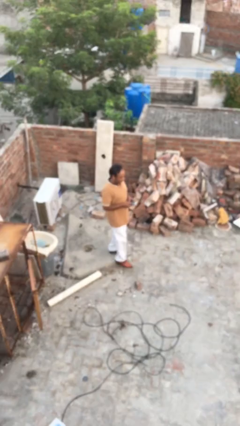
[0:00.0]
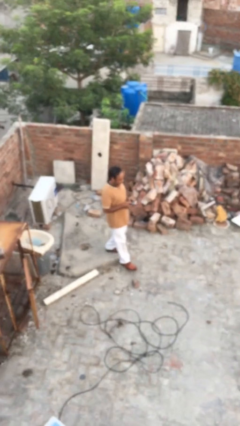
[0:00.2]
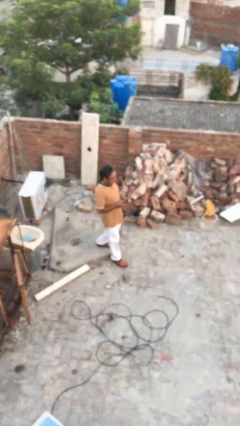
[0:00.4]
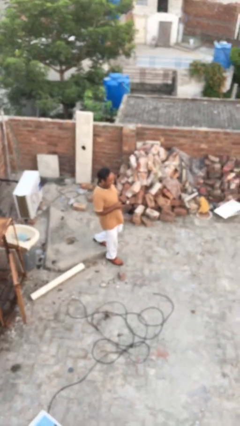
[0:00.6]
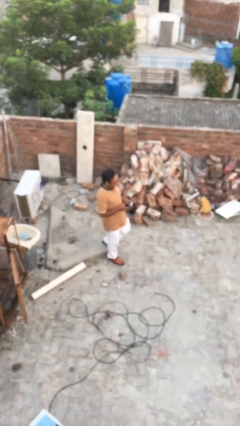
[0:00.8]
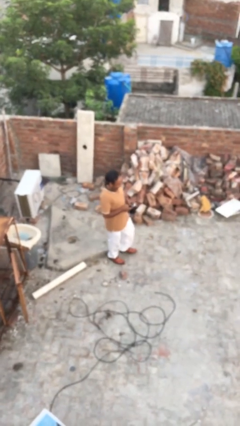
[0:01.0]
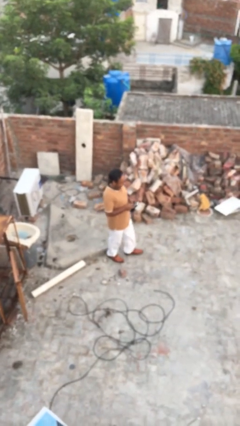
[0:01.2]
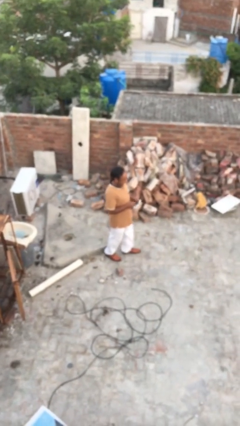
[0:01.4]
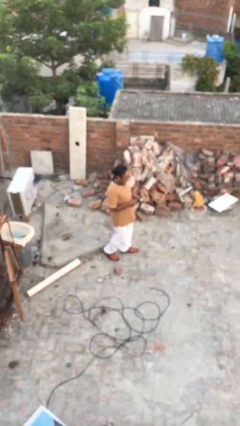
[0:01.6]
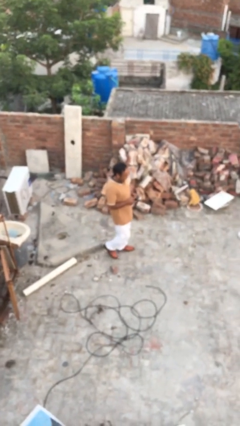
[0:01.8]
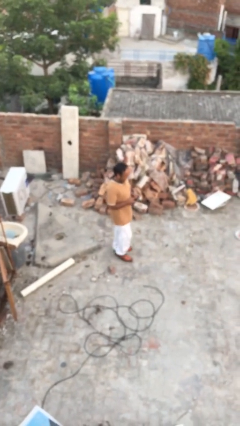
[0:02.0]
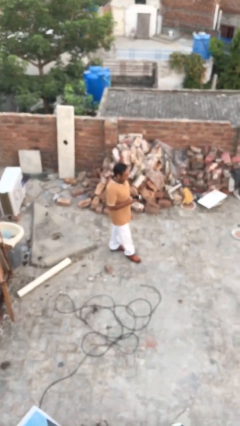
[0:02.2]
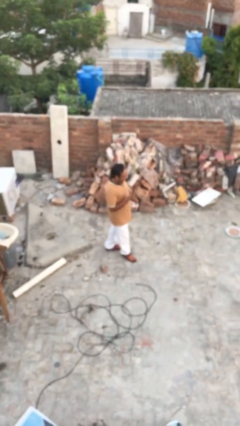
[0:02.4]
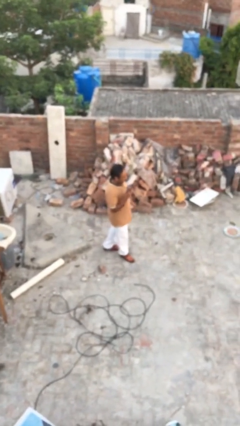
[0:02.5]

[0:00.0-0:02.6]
person texts on phone

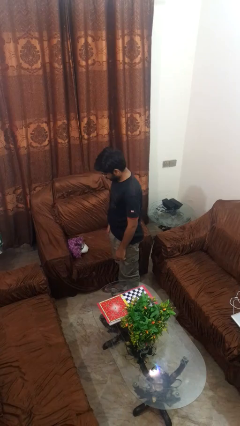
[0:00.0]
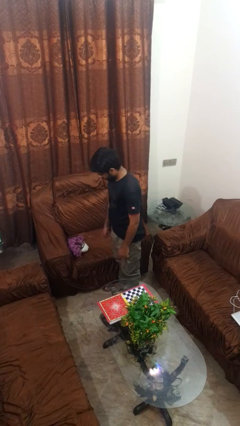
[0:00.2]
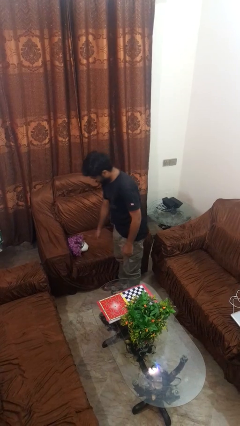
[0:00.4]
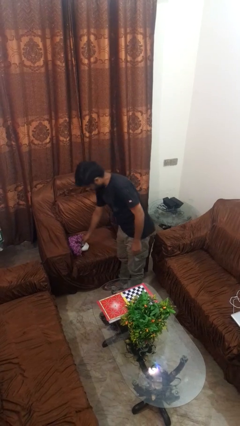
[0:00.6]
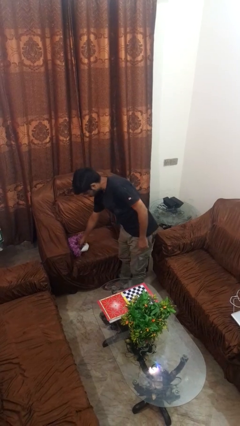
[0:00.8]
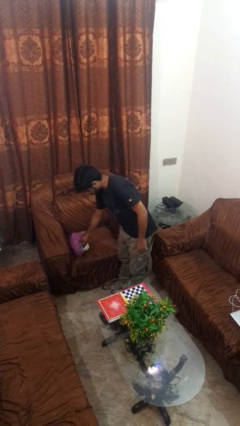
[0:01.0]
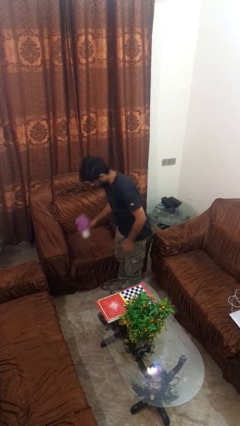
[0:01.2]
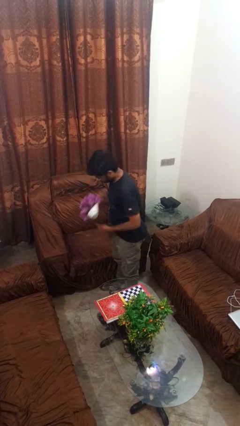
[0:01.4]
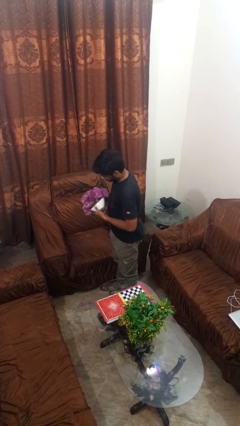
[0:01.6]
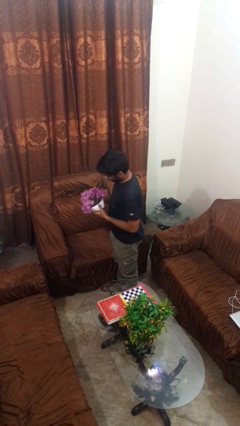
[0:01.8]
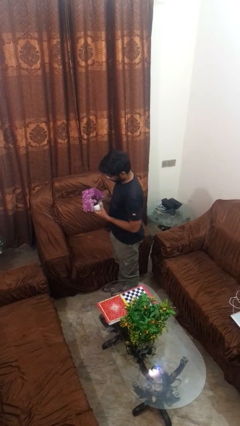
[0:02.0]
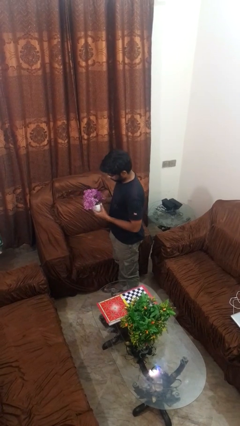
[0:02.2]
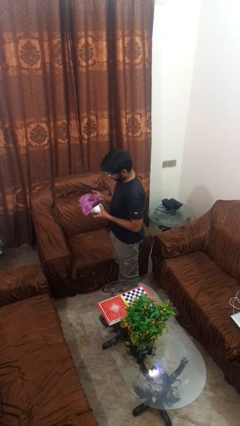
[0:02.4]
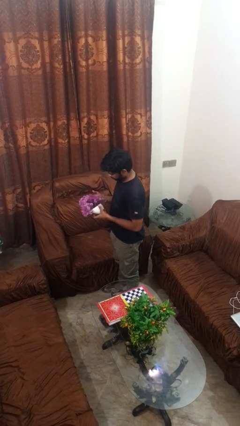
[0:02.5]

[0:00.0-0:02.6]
person picks up object from couch

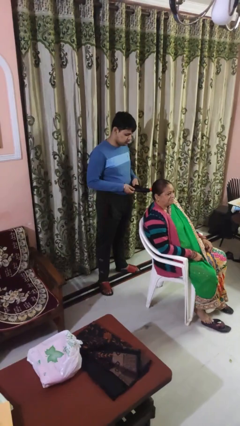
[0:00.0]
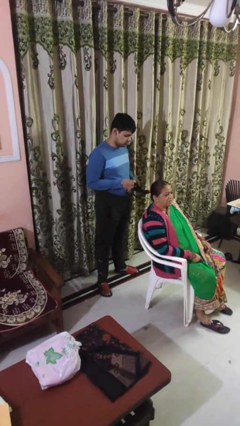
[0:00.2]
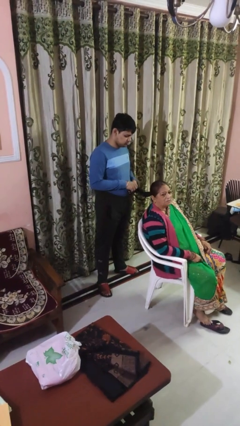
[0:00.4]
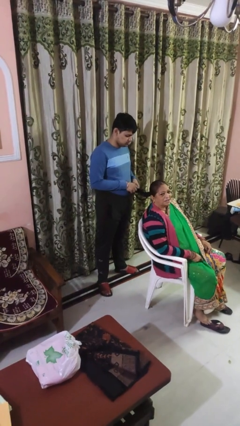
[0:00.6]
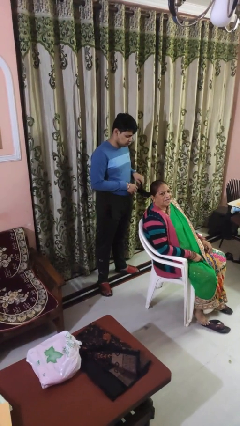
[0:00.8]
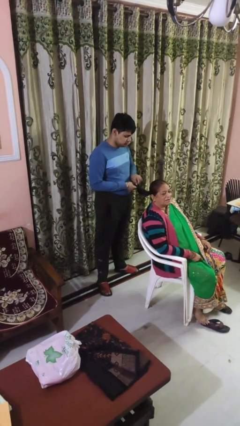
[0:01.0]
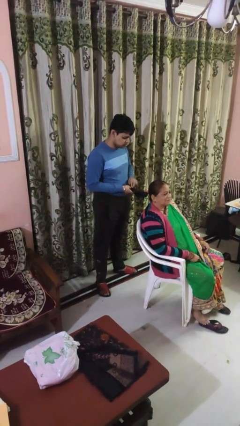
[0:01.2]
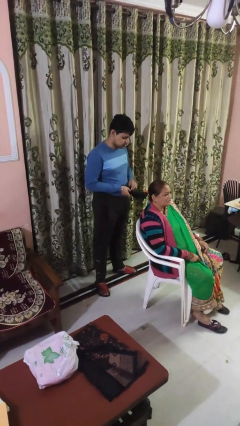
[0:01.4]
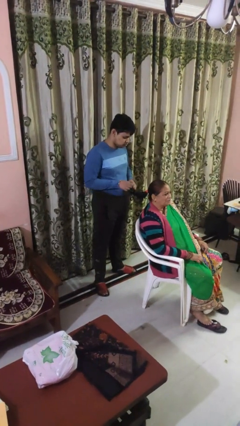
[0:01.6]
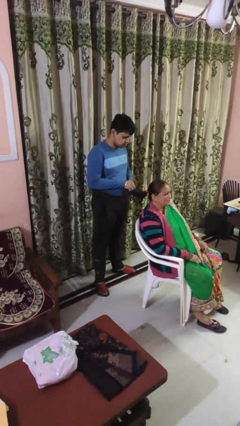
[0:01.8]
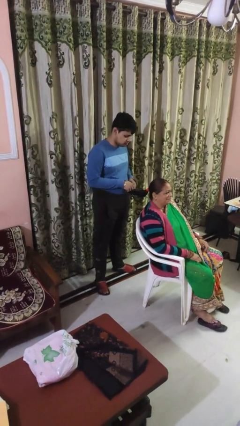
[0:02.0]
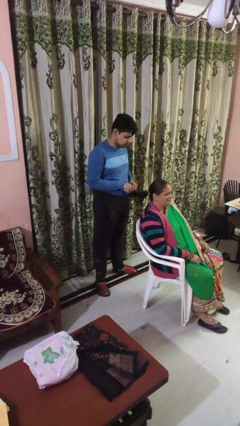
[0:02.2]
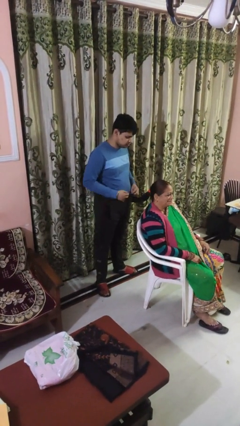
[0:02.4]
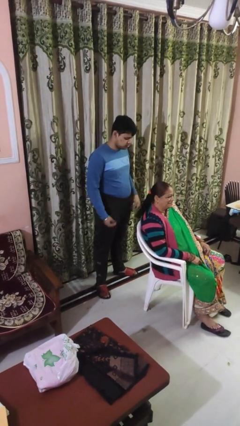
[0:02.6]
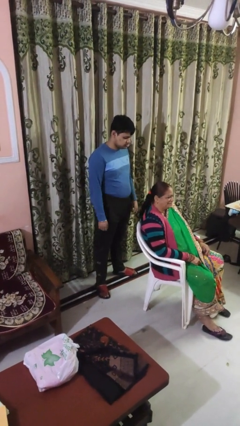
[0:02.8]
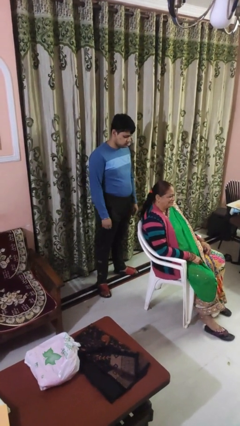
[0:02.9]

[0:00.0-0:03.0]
person braids hair of person

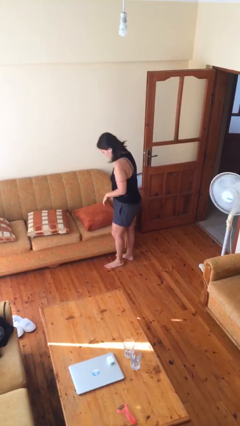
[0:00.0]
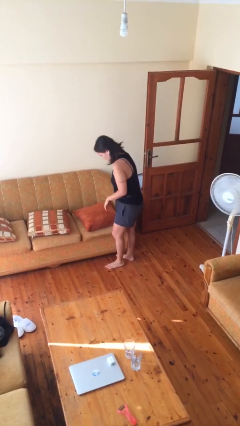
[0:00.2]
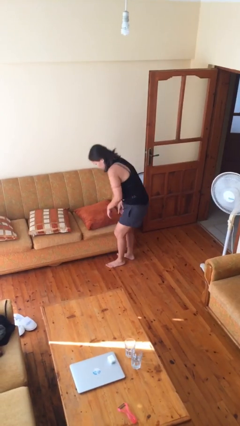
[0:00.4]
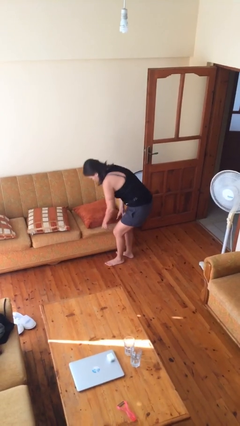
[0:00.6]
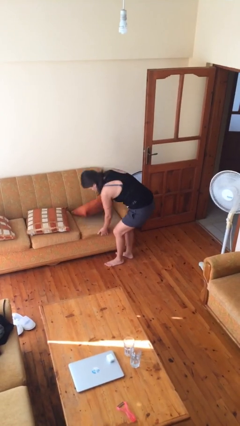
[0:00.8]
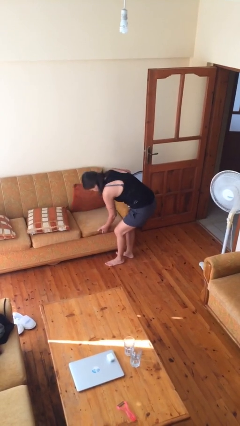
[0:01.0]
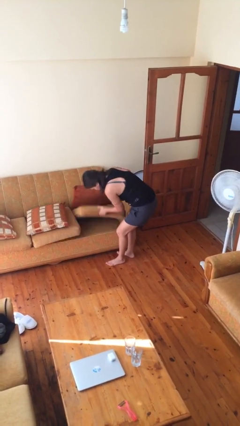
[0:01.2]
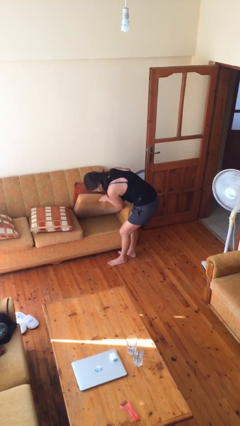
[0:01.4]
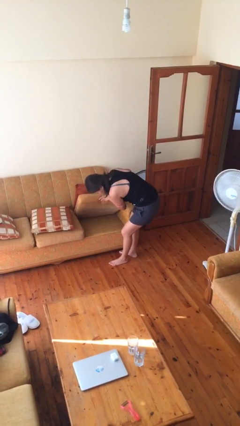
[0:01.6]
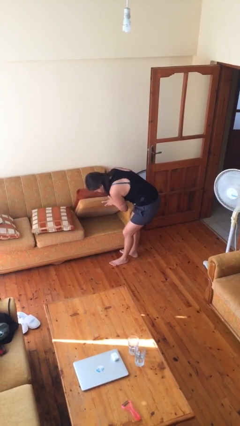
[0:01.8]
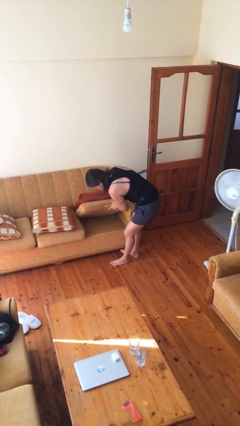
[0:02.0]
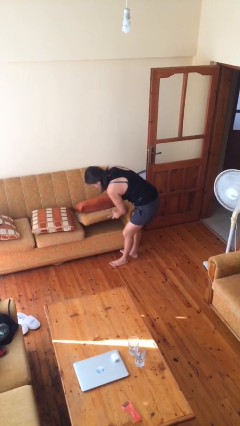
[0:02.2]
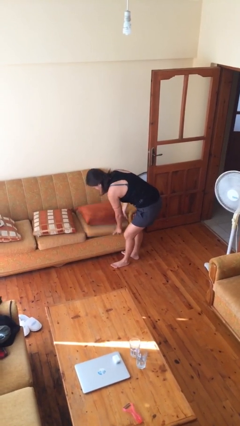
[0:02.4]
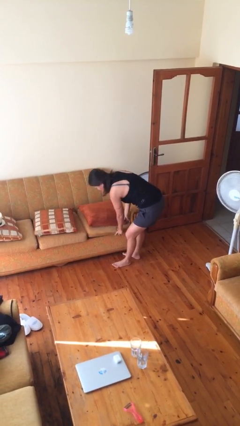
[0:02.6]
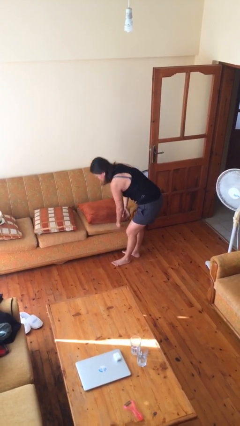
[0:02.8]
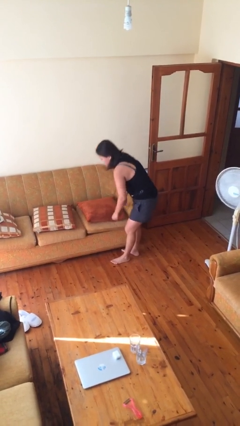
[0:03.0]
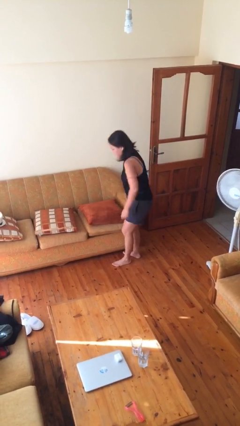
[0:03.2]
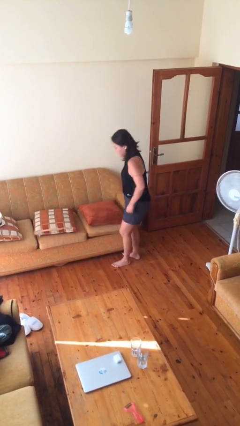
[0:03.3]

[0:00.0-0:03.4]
person searches in couch

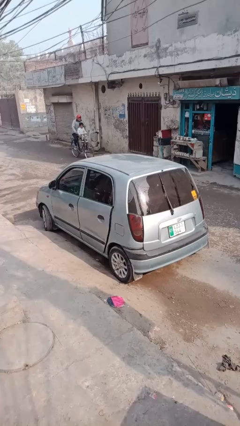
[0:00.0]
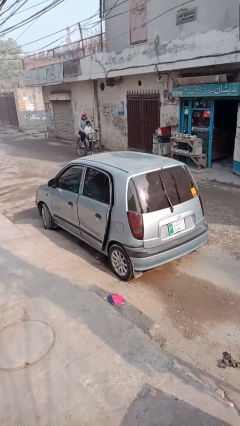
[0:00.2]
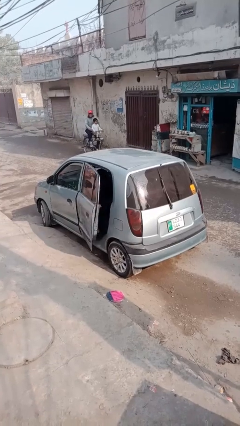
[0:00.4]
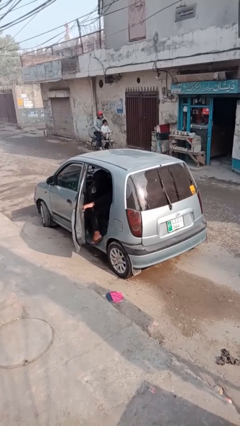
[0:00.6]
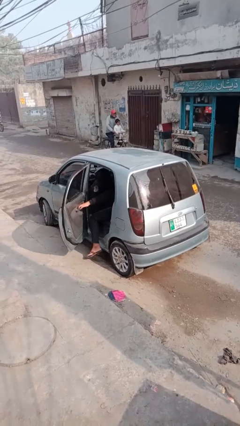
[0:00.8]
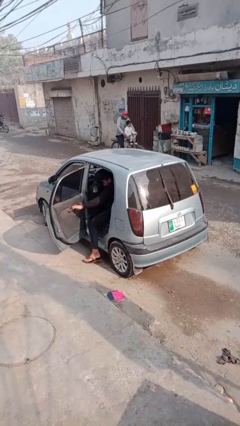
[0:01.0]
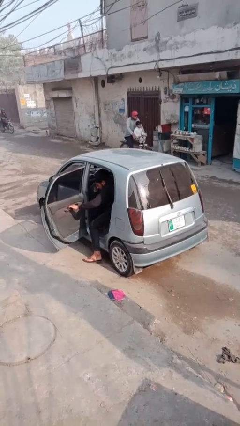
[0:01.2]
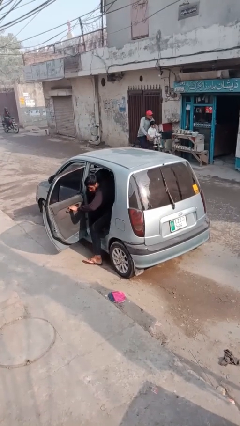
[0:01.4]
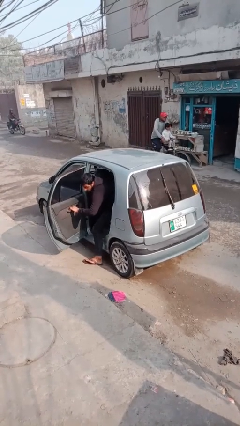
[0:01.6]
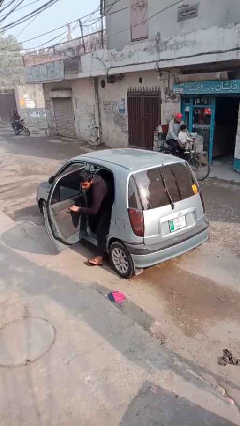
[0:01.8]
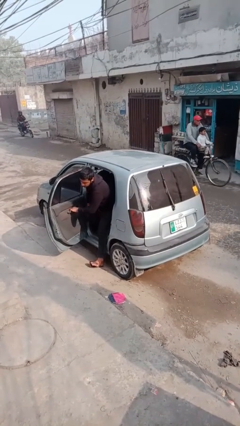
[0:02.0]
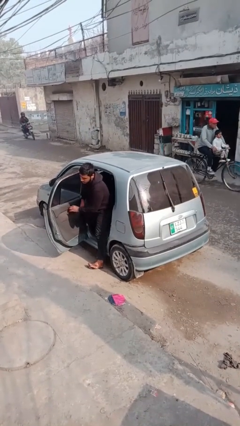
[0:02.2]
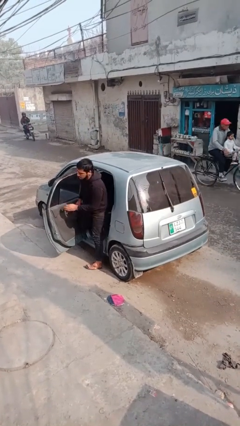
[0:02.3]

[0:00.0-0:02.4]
car drops off person

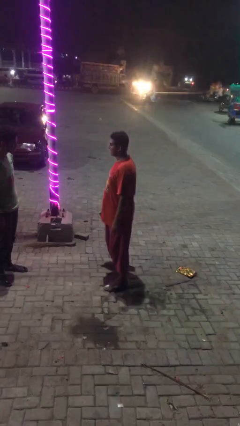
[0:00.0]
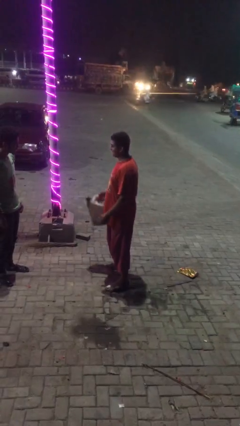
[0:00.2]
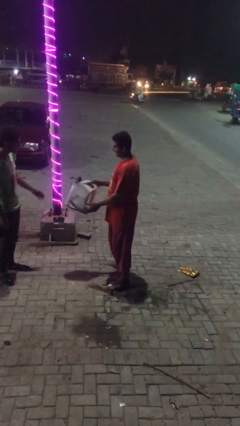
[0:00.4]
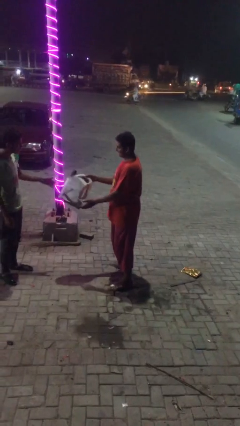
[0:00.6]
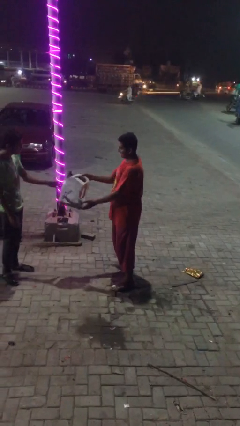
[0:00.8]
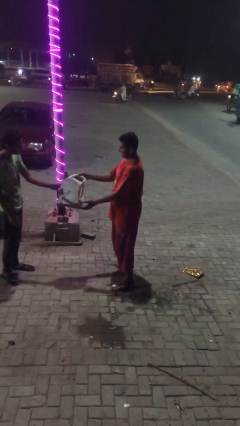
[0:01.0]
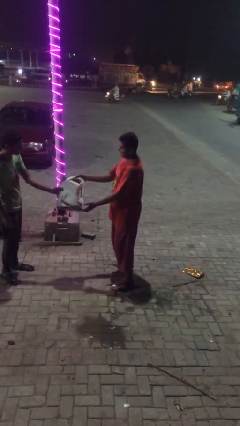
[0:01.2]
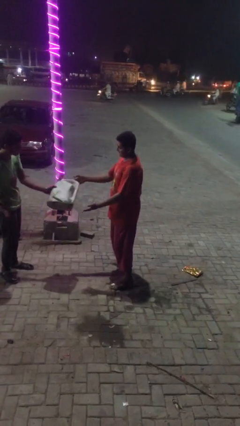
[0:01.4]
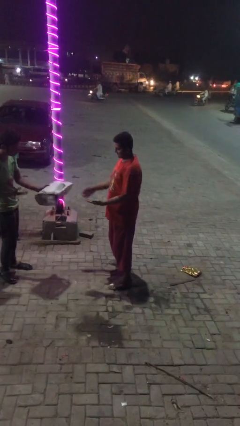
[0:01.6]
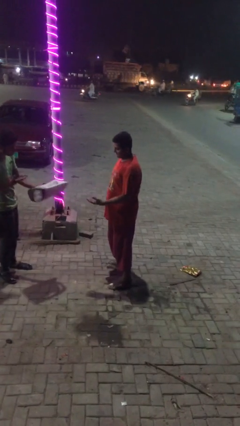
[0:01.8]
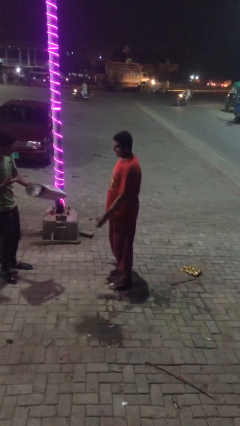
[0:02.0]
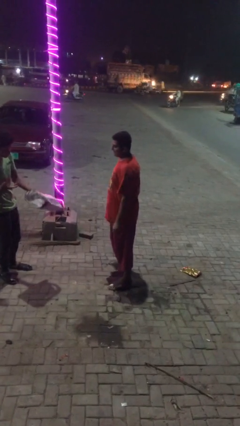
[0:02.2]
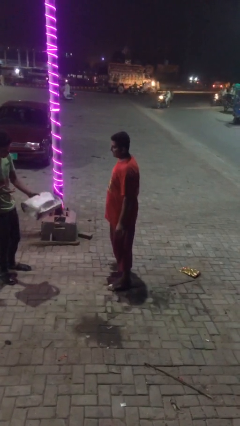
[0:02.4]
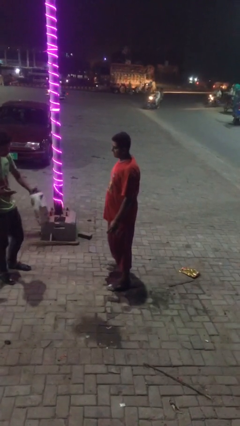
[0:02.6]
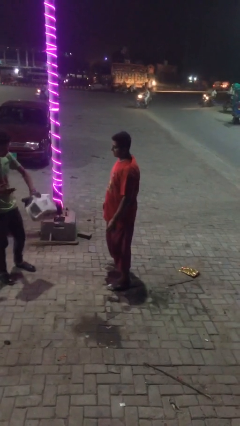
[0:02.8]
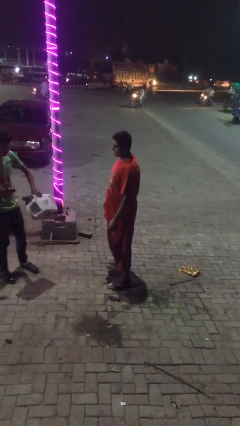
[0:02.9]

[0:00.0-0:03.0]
person transfers object to person

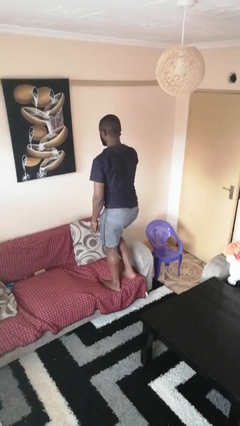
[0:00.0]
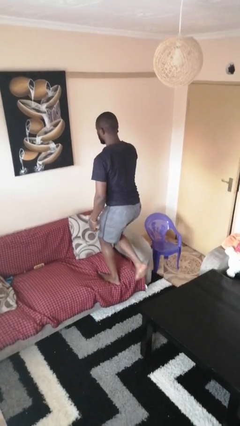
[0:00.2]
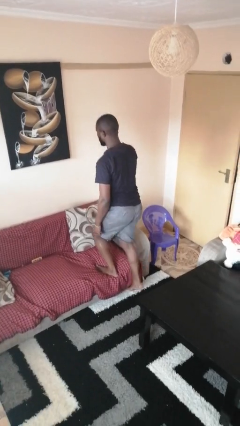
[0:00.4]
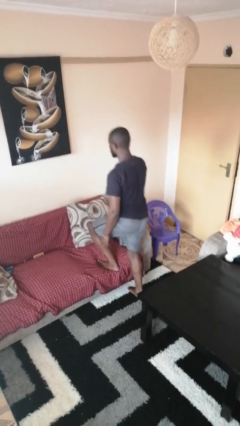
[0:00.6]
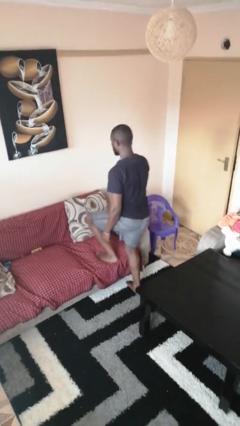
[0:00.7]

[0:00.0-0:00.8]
person climbs on couch
